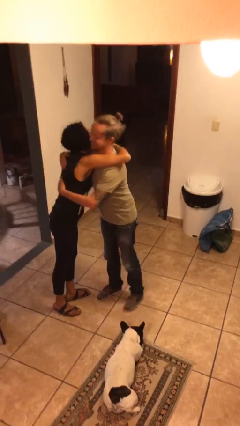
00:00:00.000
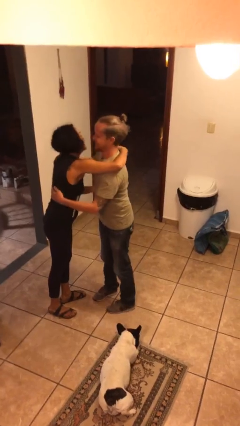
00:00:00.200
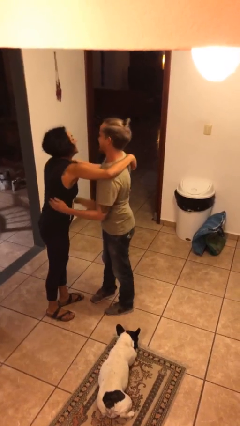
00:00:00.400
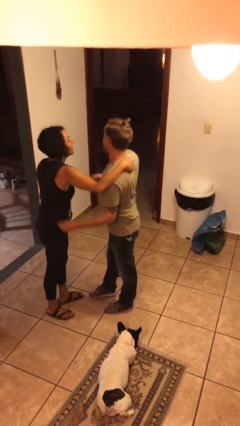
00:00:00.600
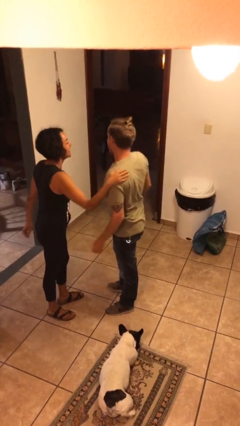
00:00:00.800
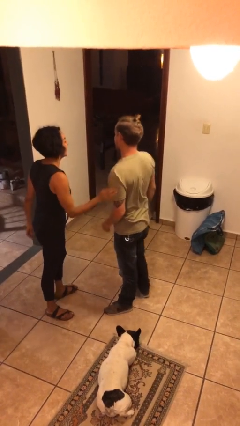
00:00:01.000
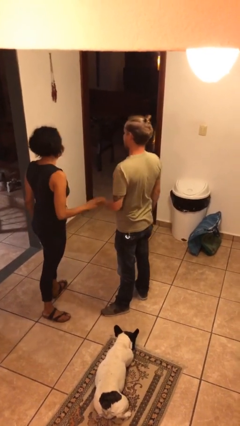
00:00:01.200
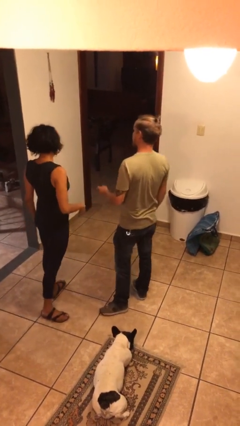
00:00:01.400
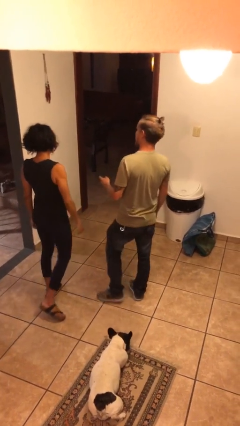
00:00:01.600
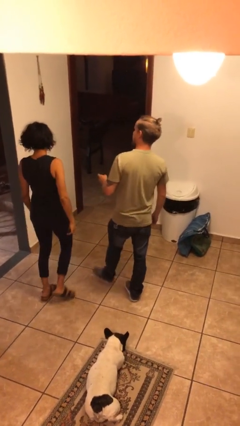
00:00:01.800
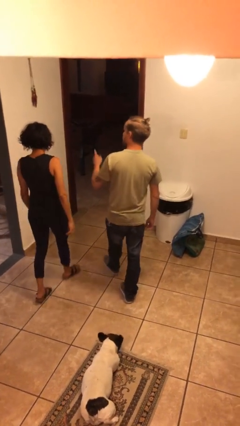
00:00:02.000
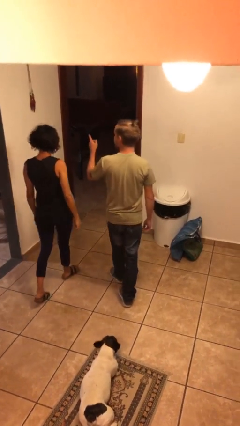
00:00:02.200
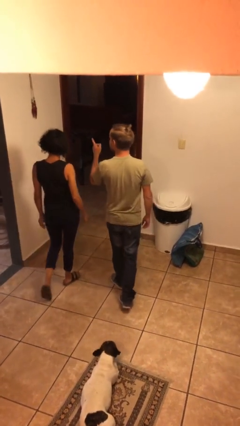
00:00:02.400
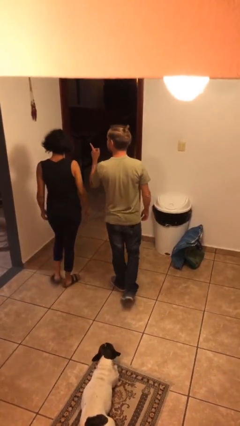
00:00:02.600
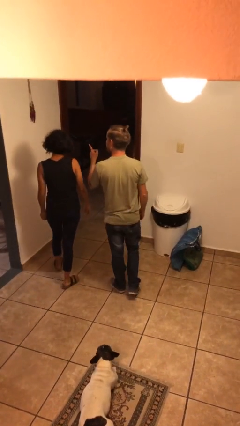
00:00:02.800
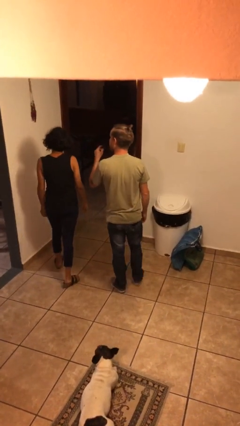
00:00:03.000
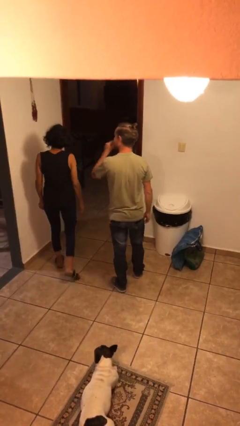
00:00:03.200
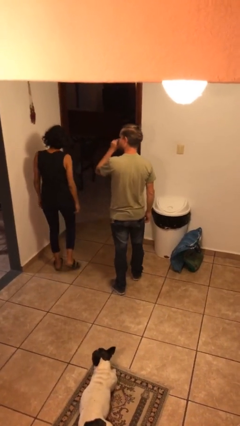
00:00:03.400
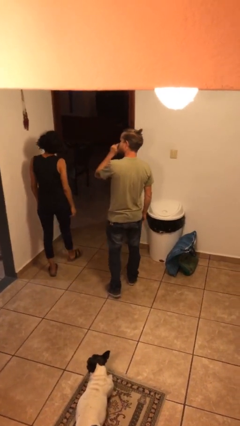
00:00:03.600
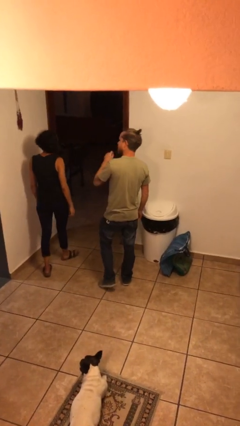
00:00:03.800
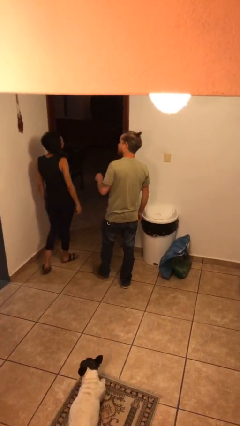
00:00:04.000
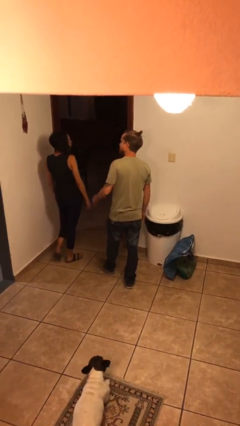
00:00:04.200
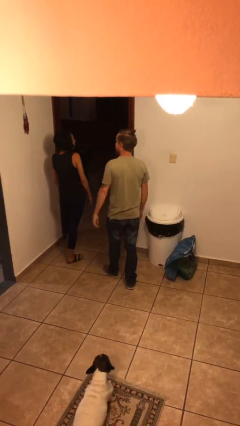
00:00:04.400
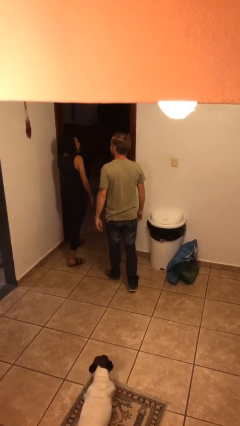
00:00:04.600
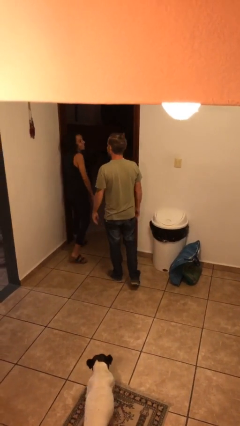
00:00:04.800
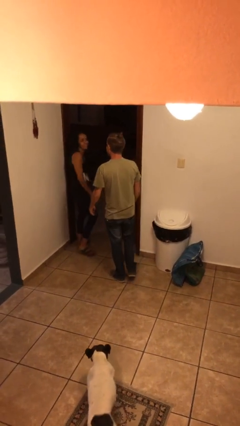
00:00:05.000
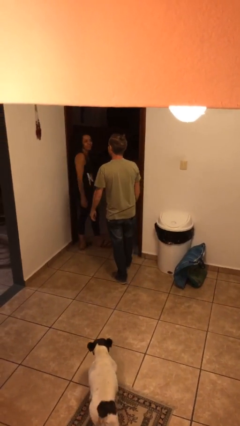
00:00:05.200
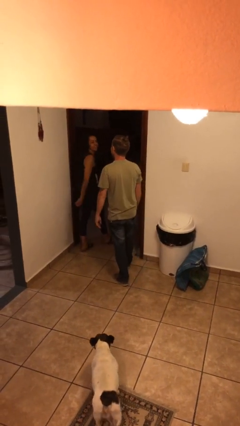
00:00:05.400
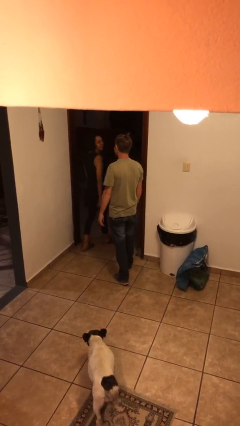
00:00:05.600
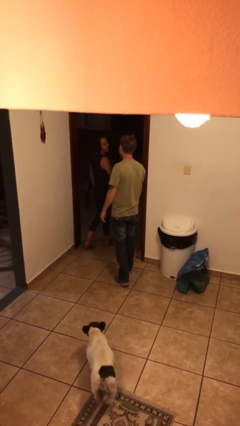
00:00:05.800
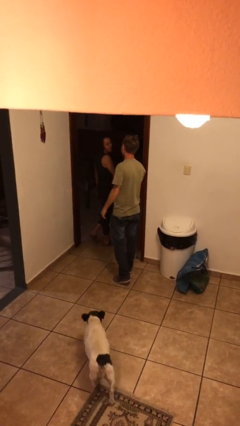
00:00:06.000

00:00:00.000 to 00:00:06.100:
person talks to person

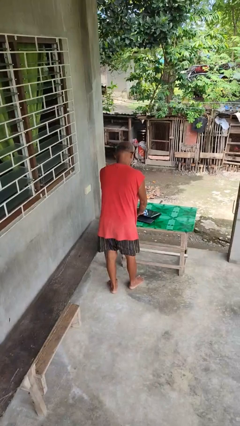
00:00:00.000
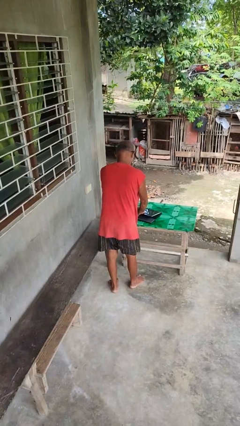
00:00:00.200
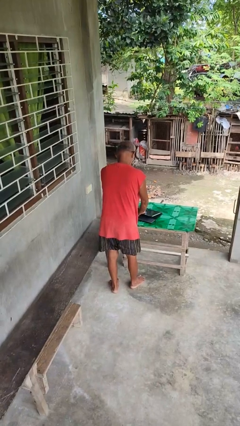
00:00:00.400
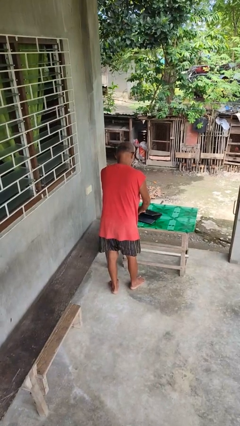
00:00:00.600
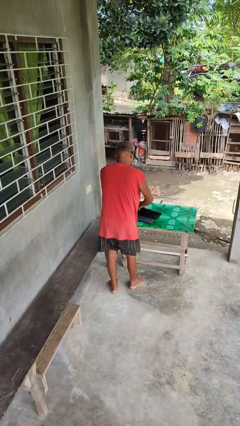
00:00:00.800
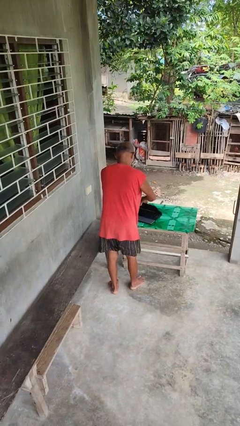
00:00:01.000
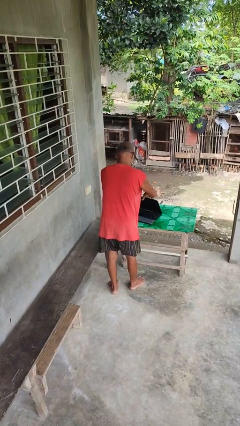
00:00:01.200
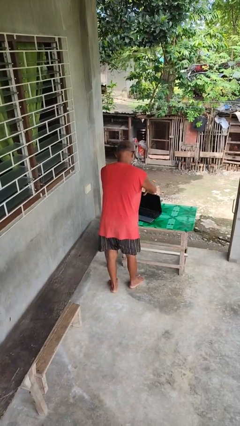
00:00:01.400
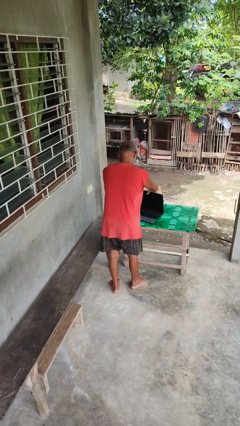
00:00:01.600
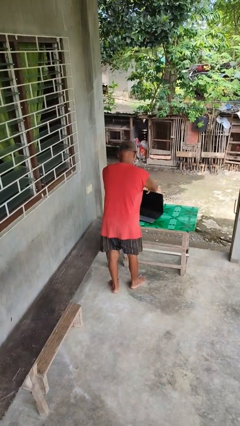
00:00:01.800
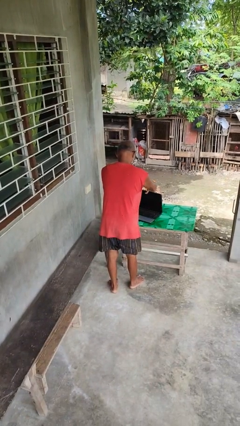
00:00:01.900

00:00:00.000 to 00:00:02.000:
person opens laptop

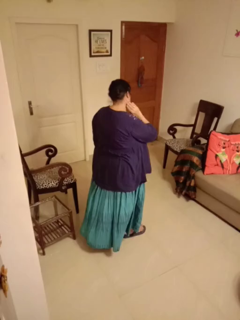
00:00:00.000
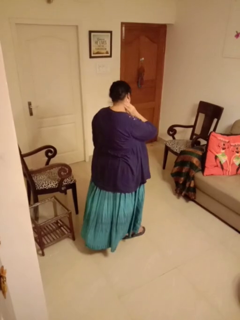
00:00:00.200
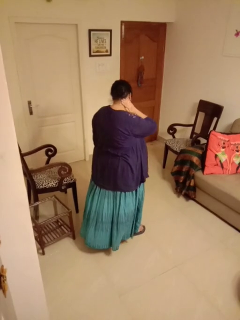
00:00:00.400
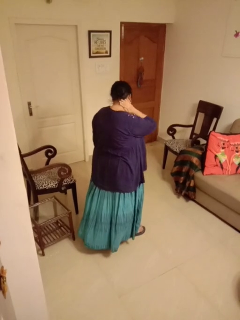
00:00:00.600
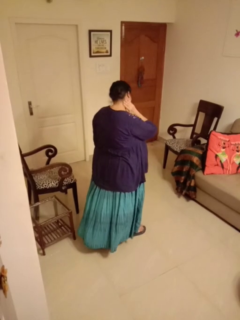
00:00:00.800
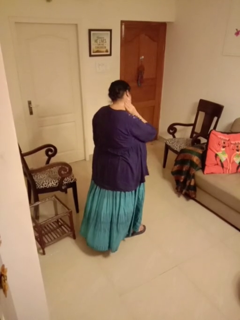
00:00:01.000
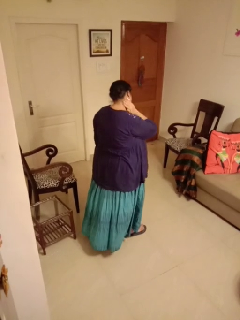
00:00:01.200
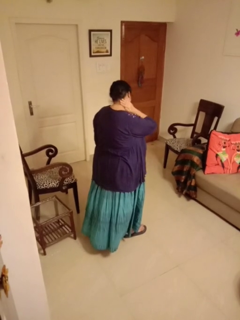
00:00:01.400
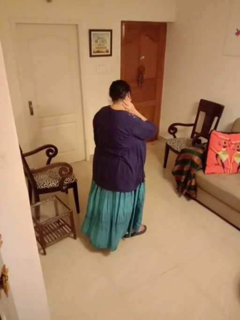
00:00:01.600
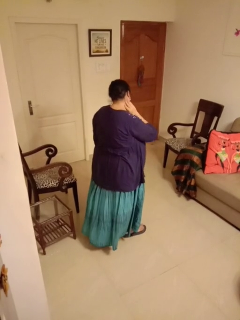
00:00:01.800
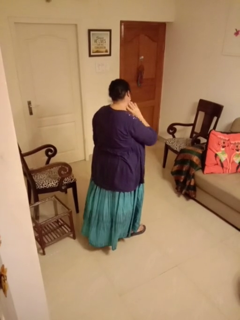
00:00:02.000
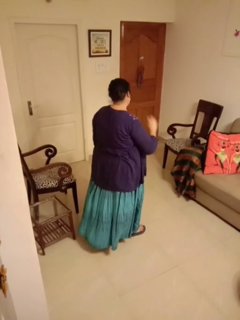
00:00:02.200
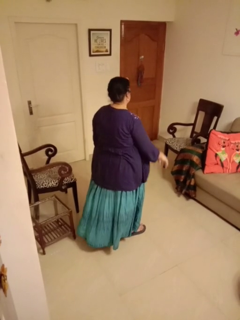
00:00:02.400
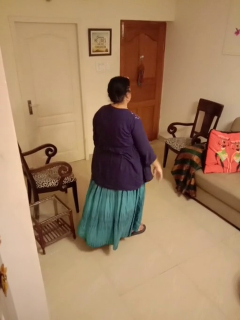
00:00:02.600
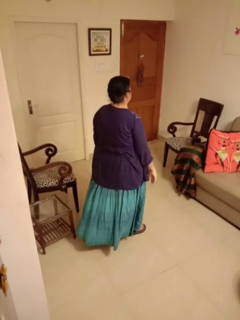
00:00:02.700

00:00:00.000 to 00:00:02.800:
person rubs neck

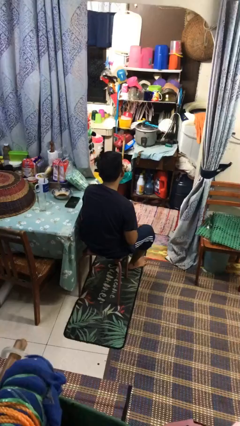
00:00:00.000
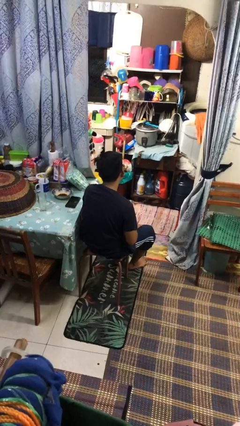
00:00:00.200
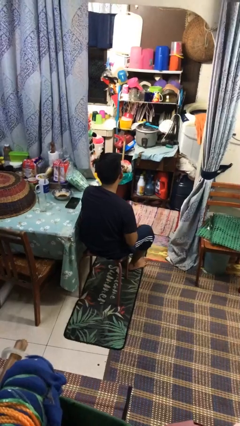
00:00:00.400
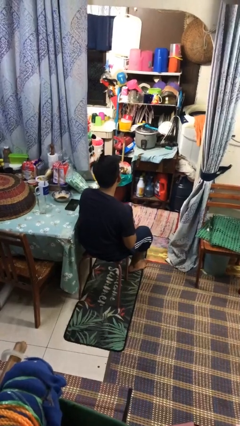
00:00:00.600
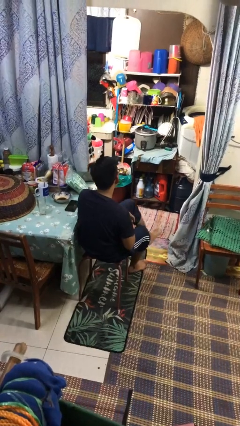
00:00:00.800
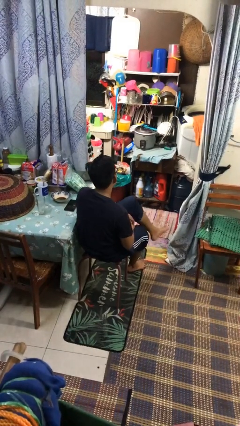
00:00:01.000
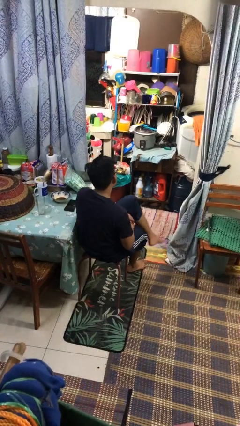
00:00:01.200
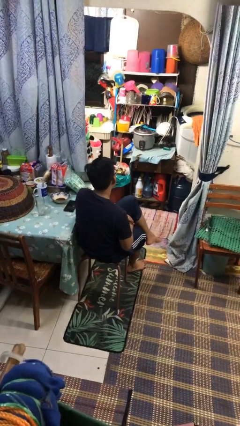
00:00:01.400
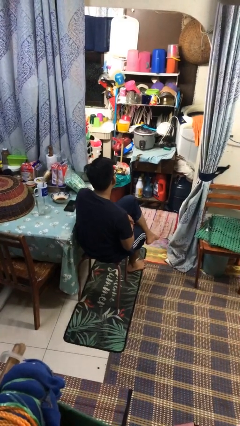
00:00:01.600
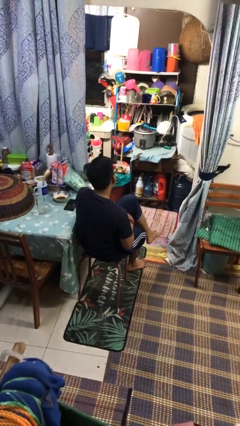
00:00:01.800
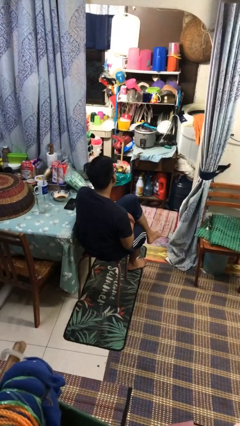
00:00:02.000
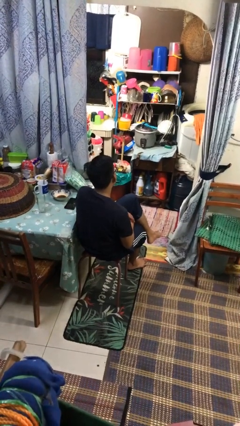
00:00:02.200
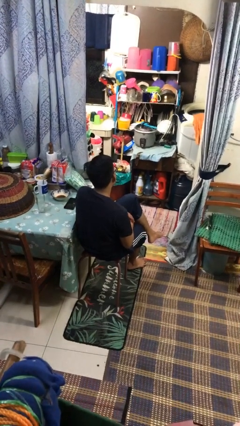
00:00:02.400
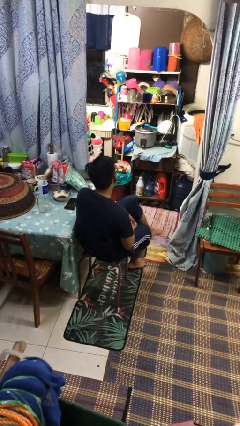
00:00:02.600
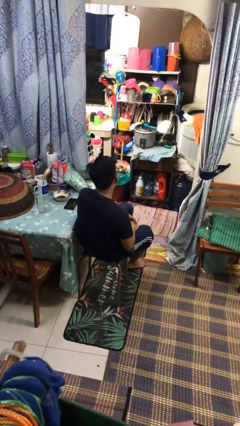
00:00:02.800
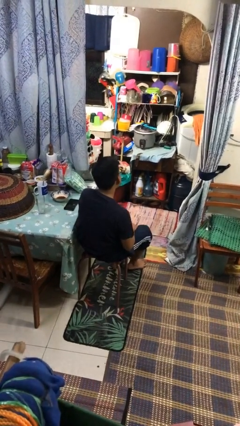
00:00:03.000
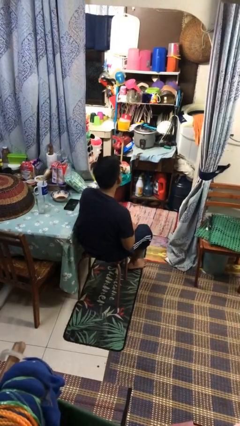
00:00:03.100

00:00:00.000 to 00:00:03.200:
person crosses legs

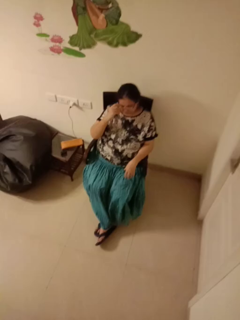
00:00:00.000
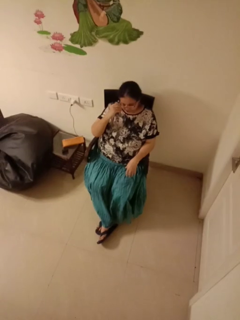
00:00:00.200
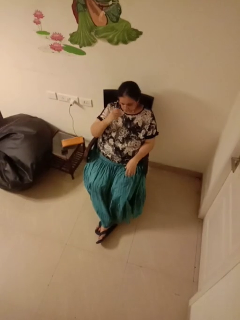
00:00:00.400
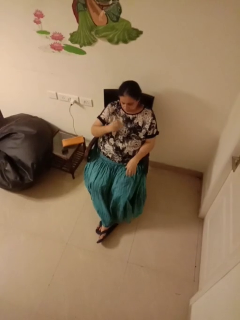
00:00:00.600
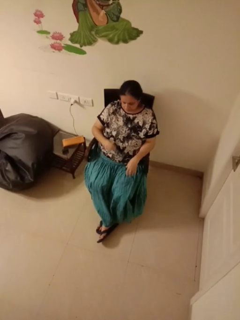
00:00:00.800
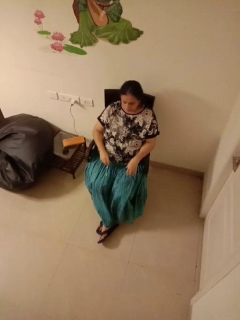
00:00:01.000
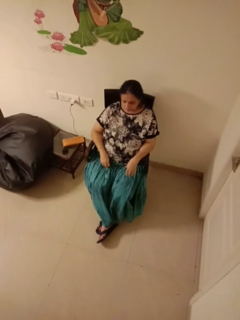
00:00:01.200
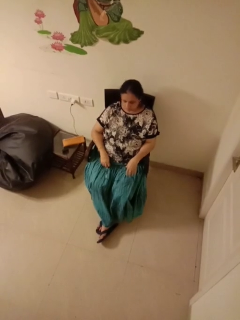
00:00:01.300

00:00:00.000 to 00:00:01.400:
person takes off glasses

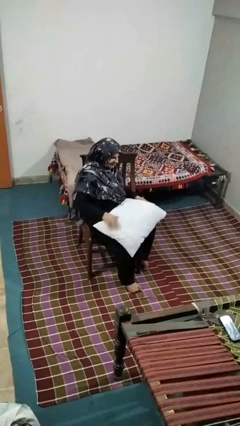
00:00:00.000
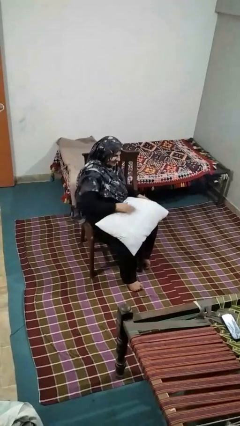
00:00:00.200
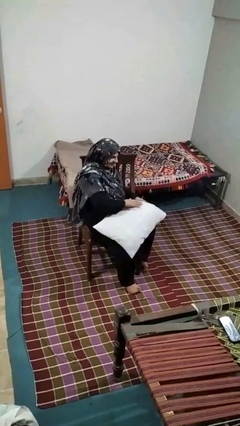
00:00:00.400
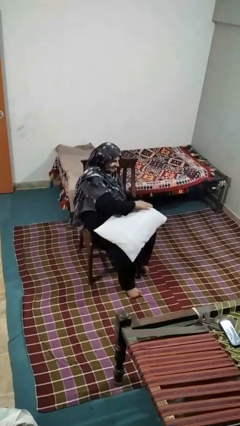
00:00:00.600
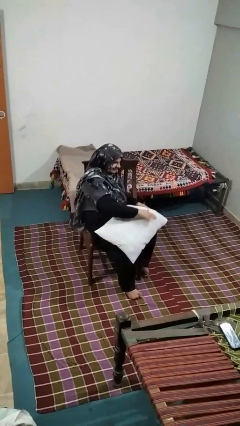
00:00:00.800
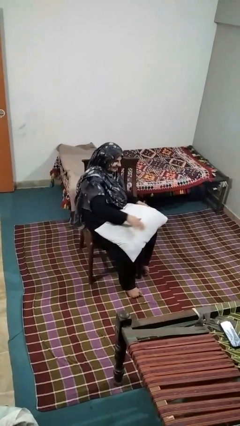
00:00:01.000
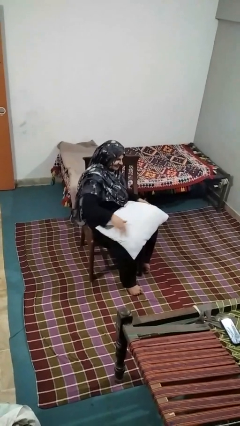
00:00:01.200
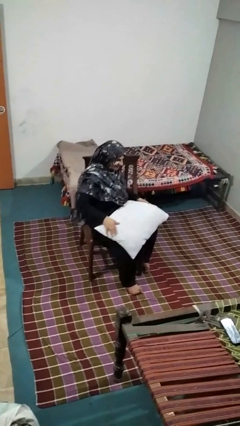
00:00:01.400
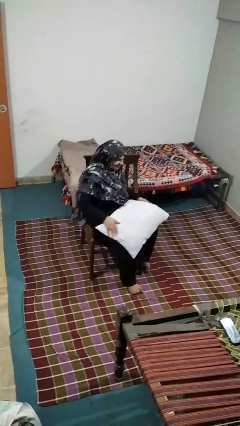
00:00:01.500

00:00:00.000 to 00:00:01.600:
person waves hand over object

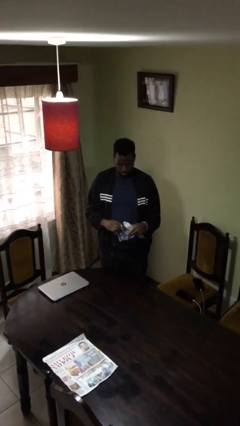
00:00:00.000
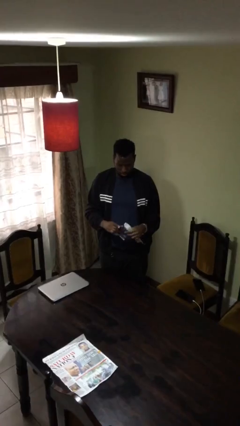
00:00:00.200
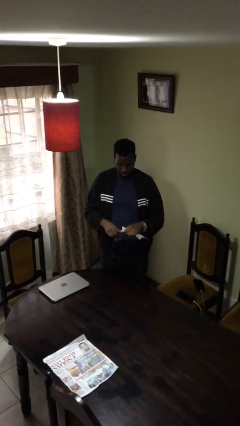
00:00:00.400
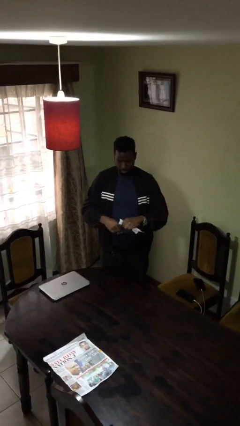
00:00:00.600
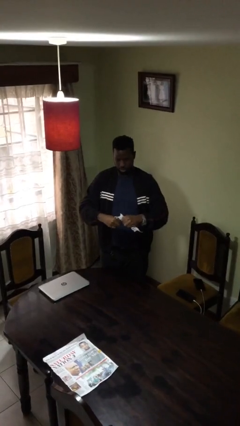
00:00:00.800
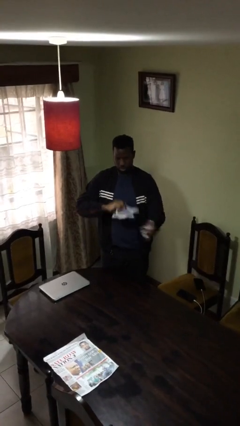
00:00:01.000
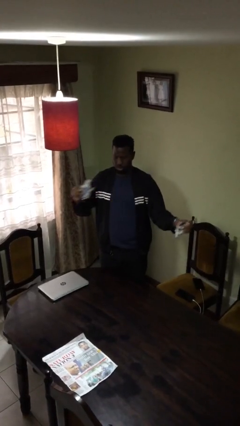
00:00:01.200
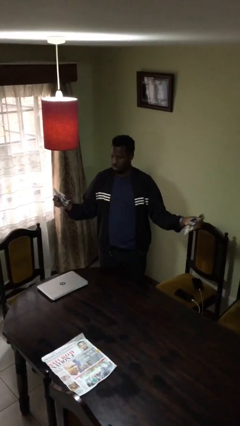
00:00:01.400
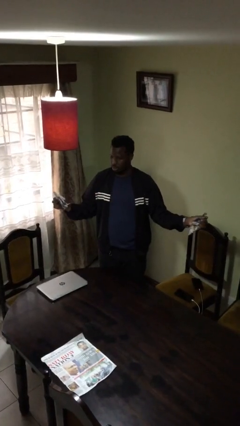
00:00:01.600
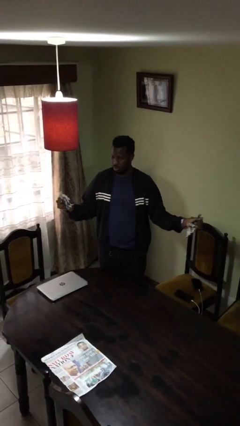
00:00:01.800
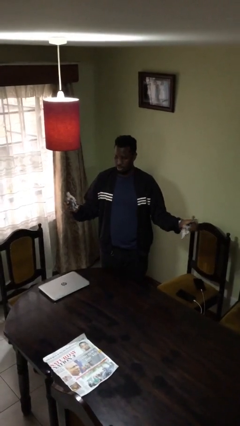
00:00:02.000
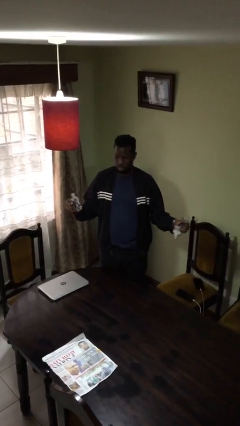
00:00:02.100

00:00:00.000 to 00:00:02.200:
person tears paper
